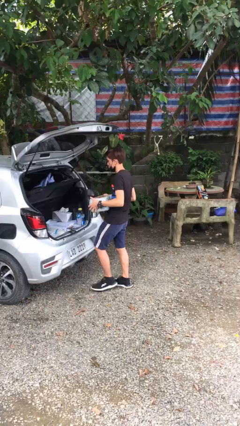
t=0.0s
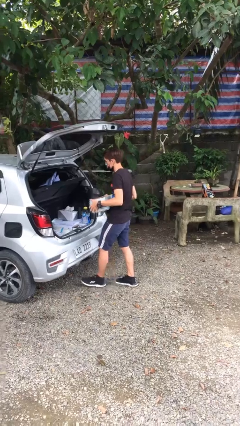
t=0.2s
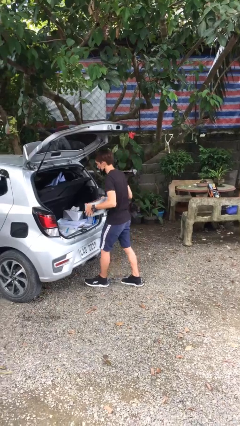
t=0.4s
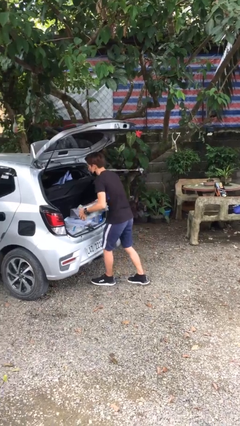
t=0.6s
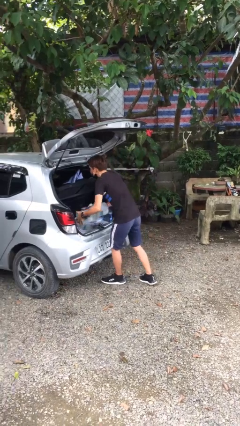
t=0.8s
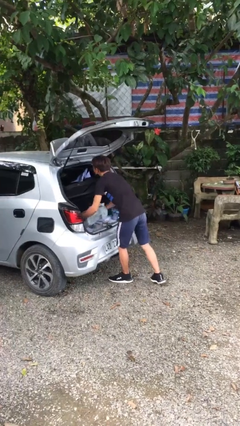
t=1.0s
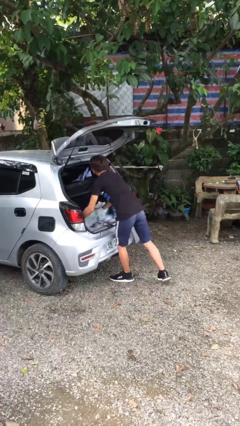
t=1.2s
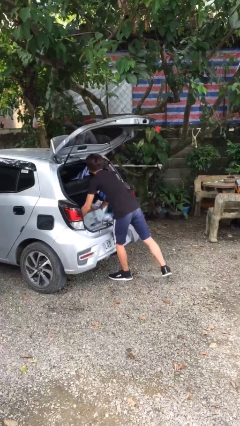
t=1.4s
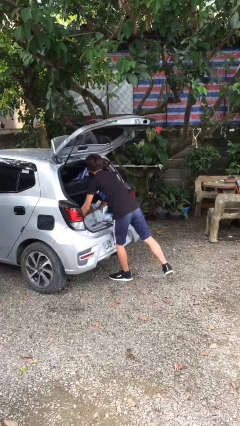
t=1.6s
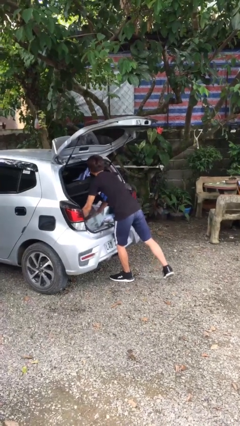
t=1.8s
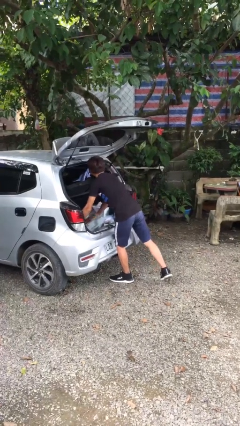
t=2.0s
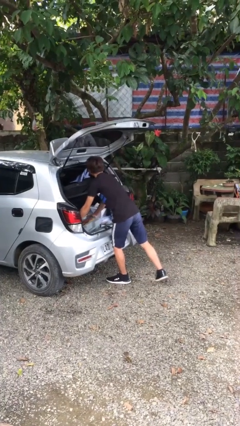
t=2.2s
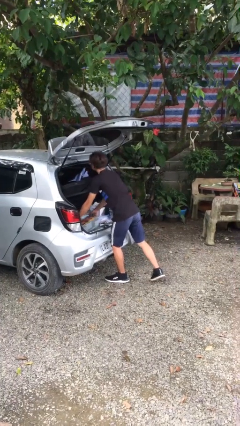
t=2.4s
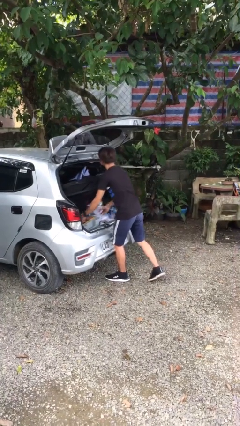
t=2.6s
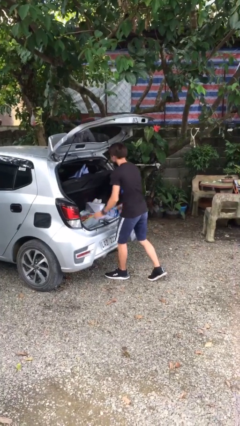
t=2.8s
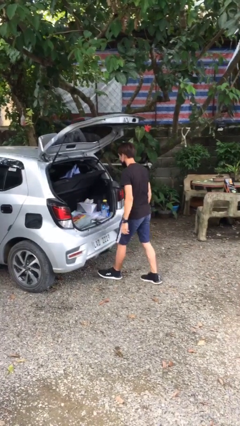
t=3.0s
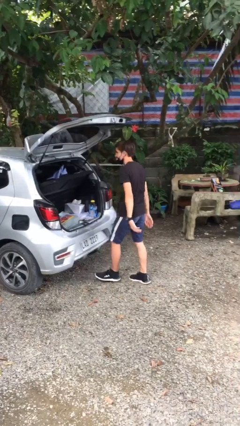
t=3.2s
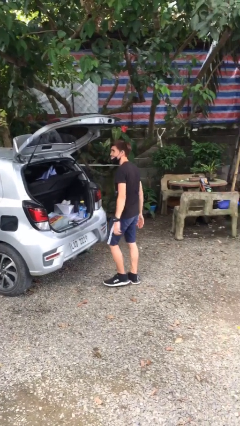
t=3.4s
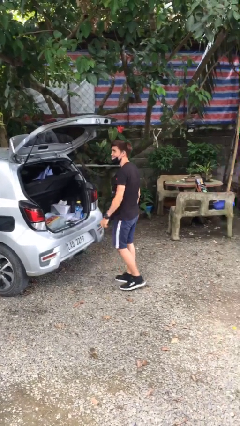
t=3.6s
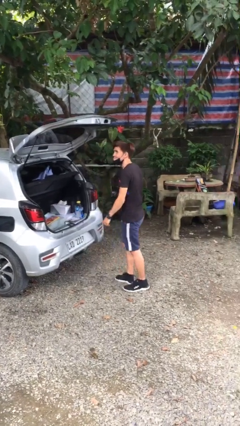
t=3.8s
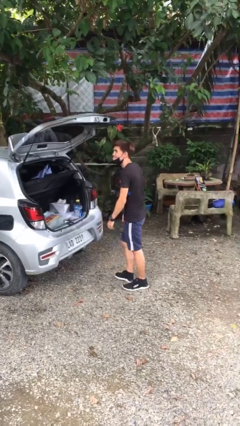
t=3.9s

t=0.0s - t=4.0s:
person loads car

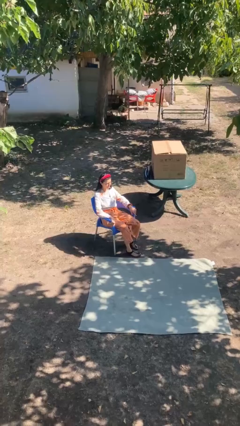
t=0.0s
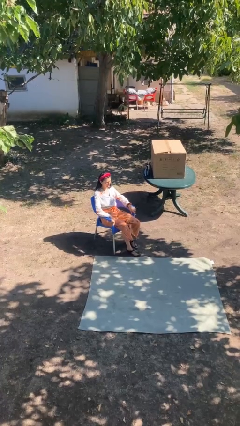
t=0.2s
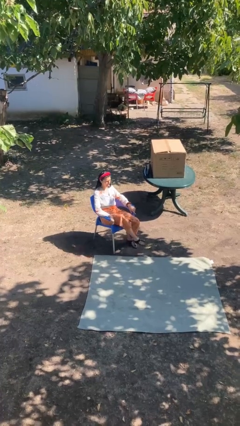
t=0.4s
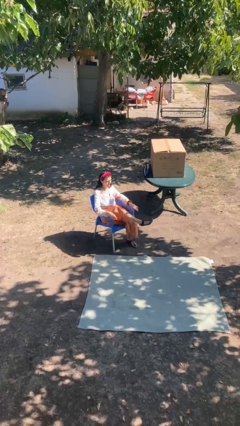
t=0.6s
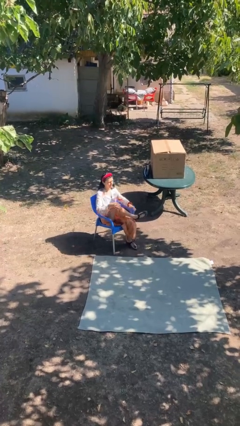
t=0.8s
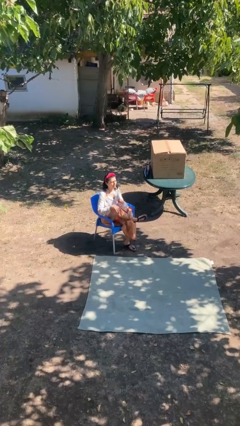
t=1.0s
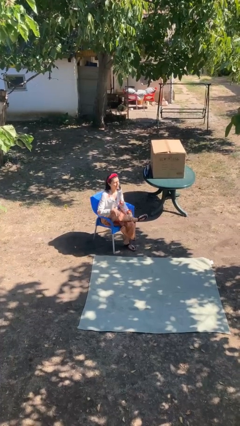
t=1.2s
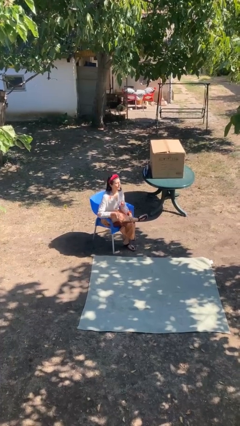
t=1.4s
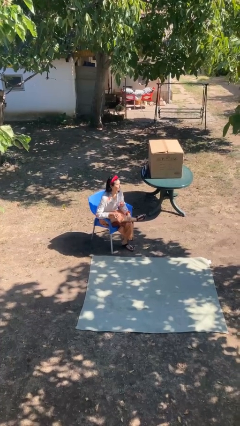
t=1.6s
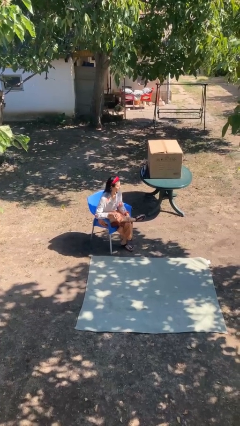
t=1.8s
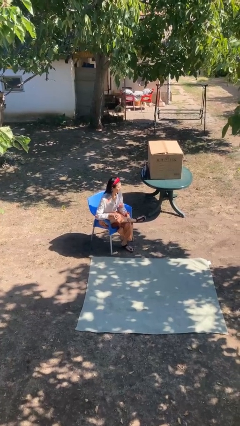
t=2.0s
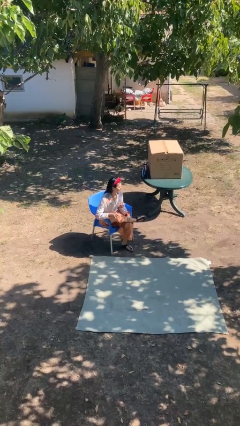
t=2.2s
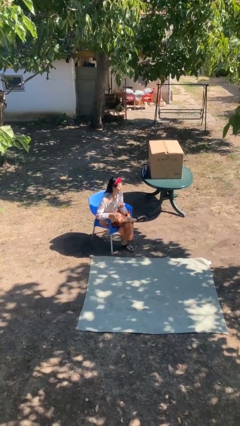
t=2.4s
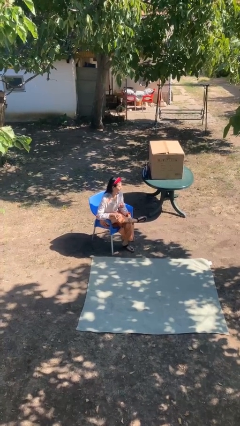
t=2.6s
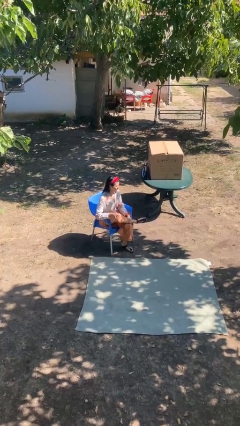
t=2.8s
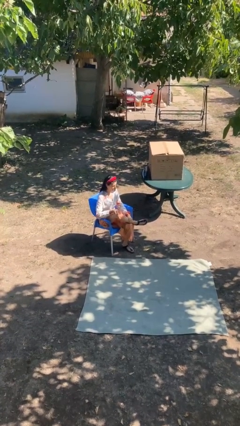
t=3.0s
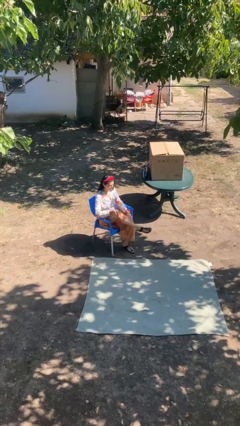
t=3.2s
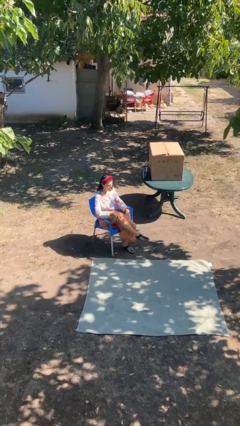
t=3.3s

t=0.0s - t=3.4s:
person crosses legs

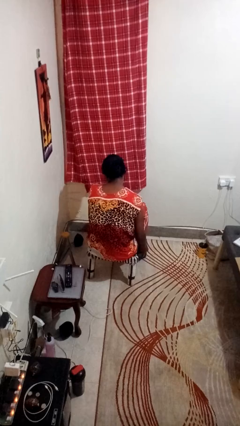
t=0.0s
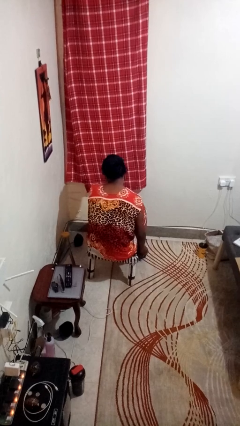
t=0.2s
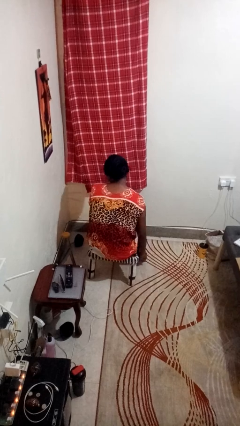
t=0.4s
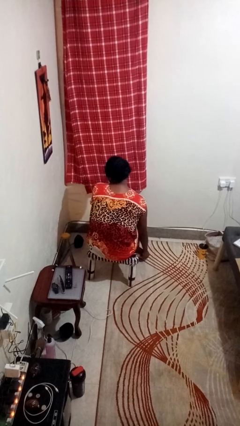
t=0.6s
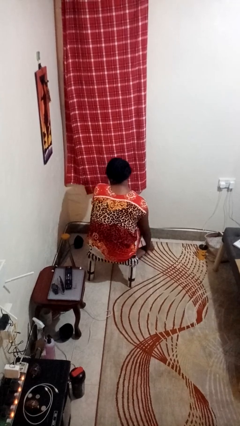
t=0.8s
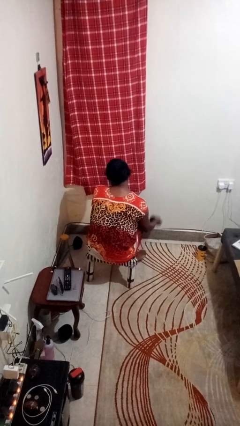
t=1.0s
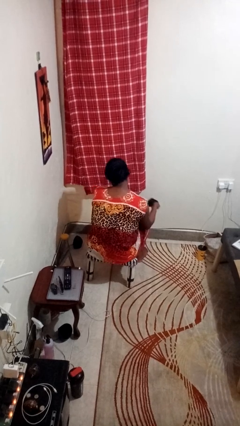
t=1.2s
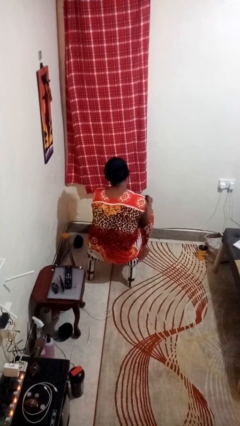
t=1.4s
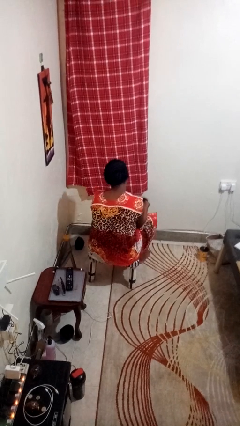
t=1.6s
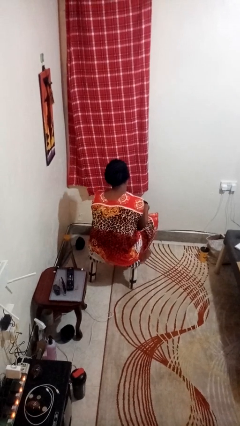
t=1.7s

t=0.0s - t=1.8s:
person takes off socks

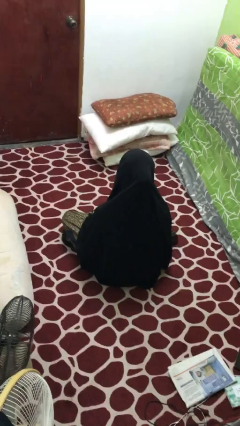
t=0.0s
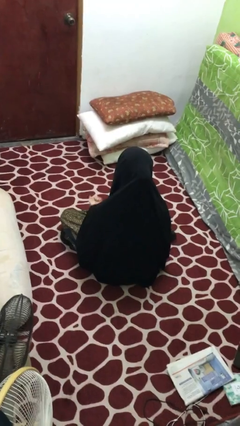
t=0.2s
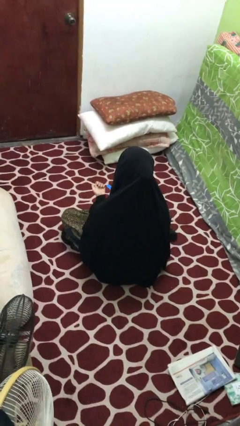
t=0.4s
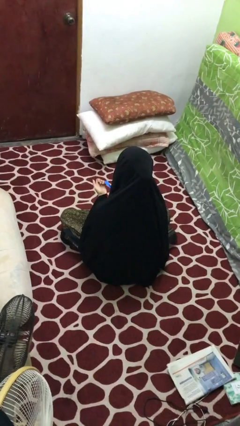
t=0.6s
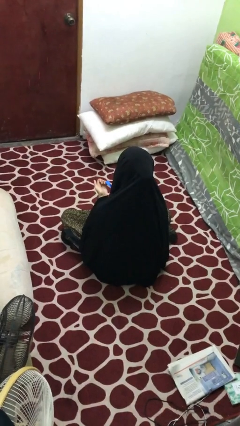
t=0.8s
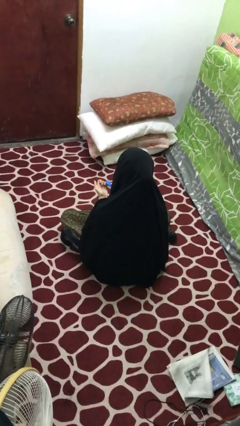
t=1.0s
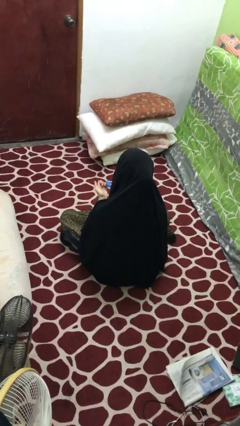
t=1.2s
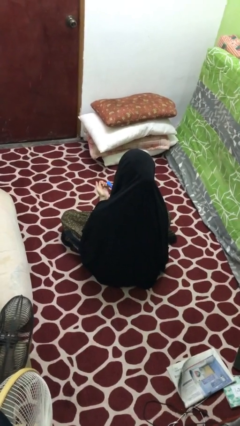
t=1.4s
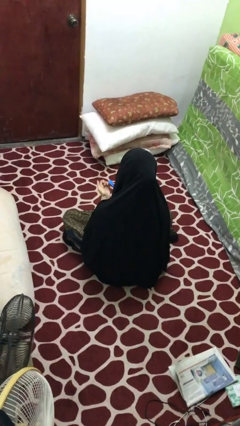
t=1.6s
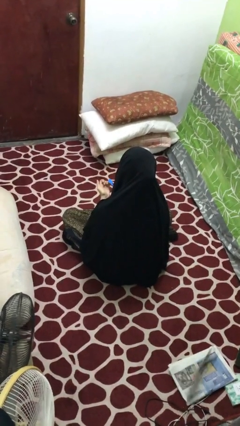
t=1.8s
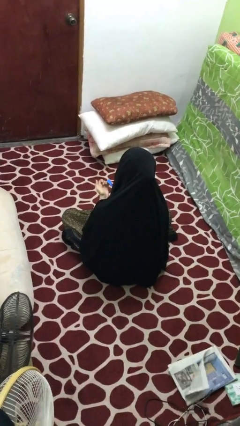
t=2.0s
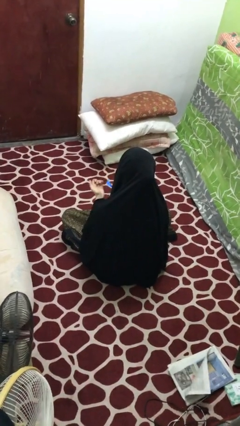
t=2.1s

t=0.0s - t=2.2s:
person files fingernails

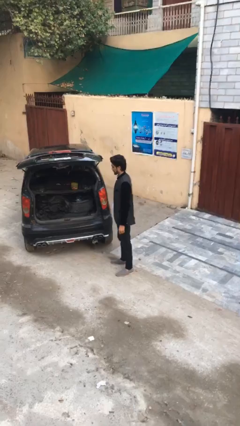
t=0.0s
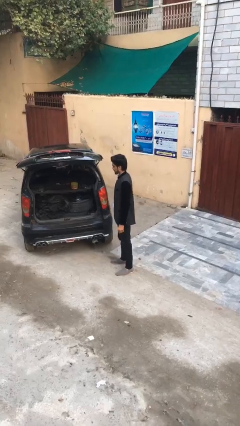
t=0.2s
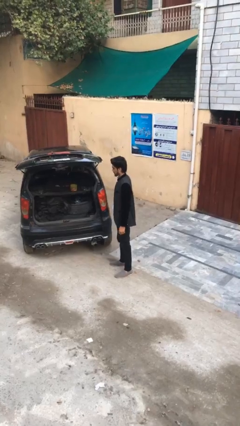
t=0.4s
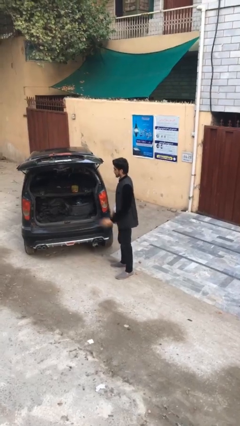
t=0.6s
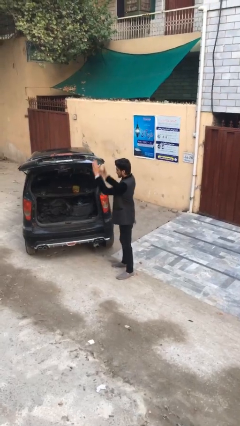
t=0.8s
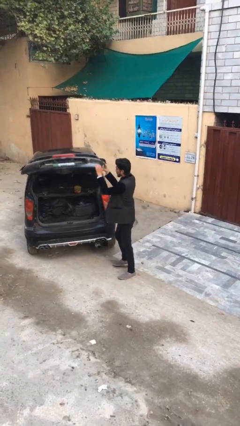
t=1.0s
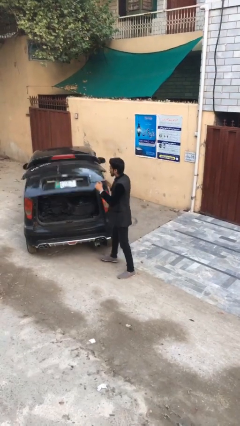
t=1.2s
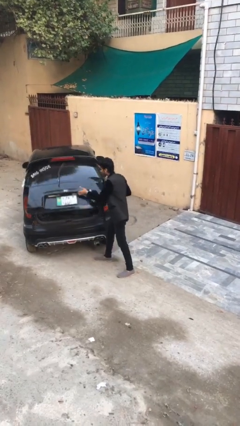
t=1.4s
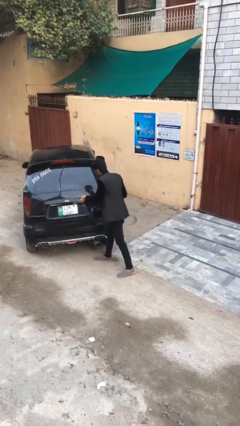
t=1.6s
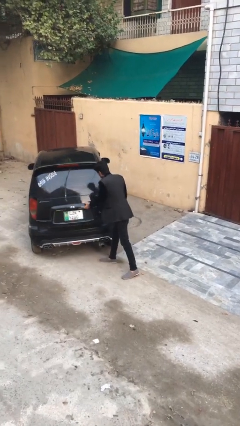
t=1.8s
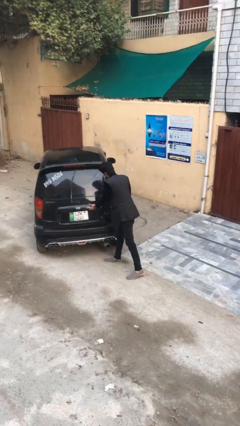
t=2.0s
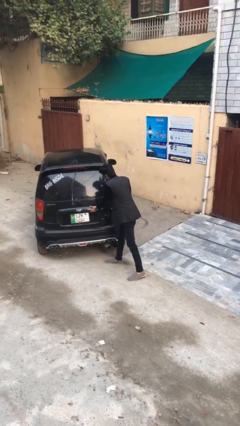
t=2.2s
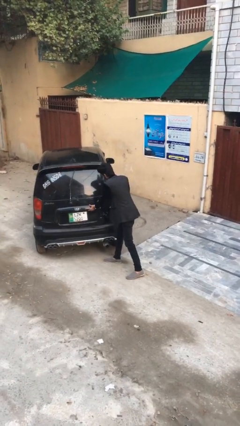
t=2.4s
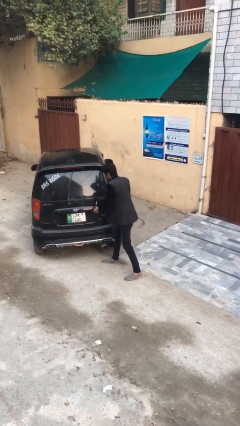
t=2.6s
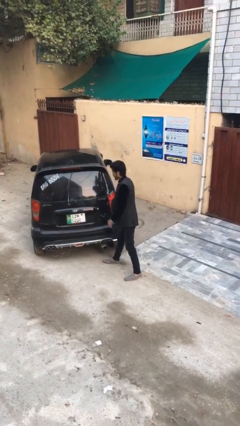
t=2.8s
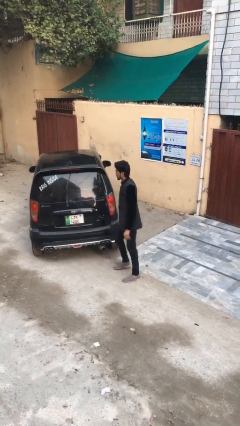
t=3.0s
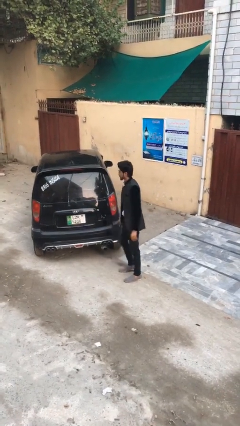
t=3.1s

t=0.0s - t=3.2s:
person closes car trunk

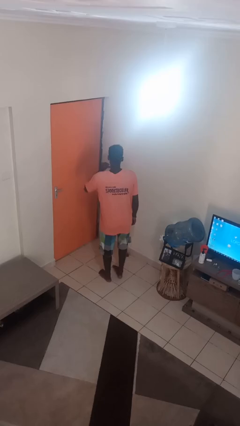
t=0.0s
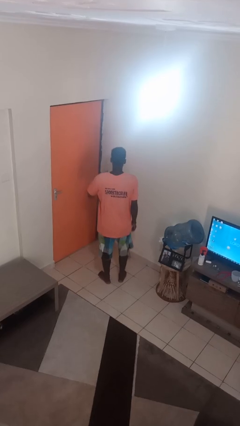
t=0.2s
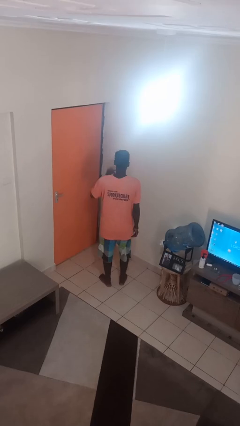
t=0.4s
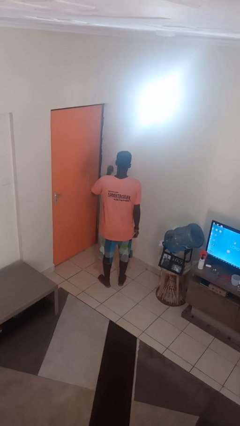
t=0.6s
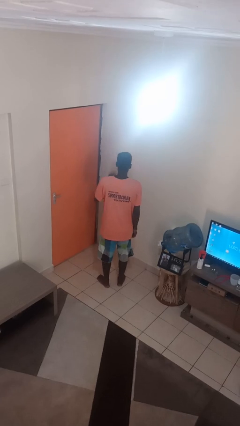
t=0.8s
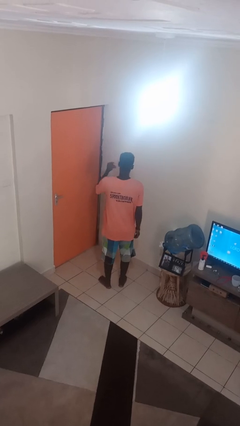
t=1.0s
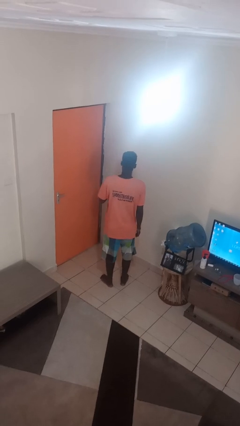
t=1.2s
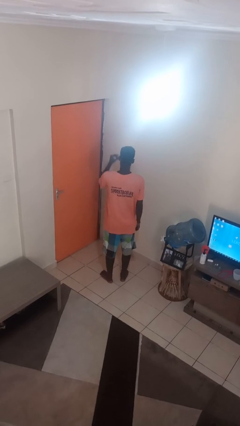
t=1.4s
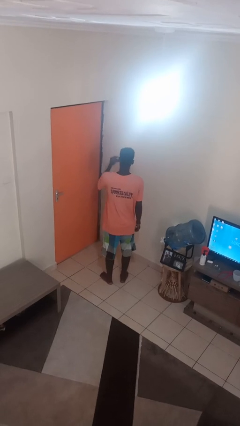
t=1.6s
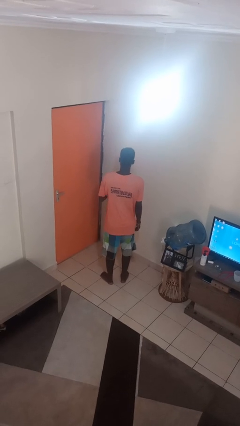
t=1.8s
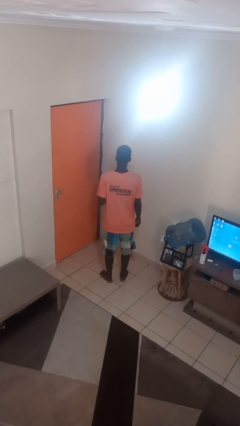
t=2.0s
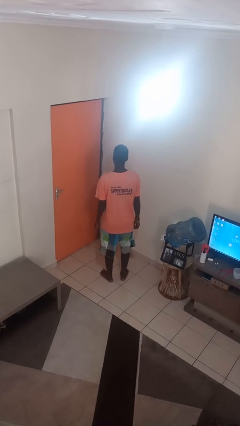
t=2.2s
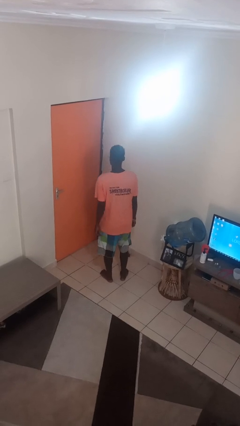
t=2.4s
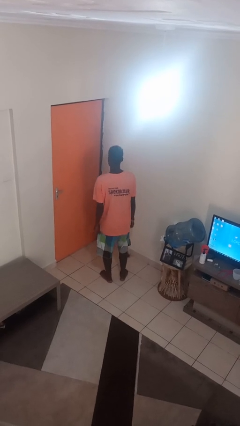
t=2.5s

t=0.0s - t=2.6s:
person snaps fingers
